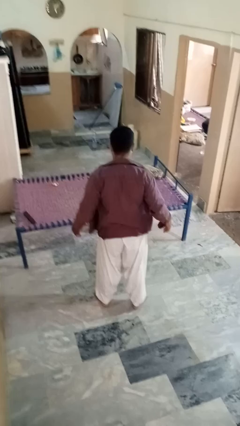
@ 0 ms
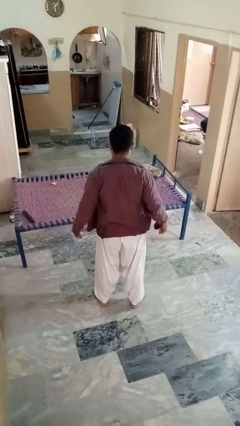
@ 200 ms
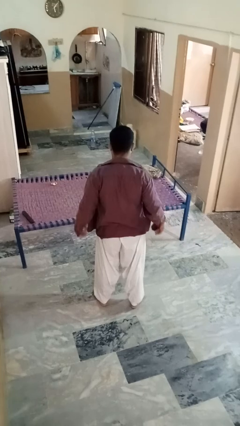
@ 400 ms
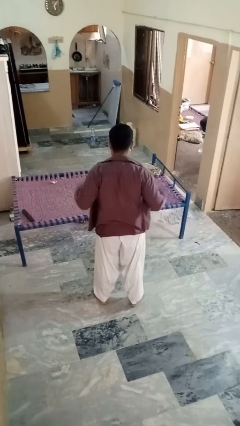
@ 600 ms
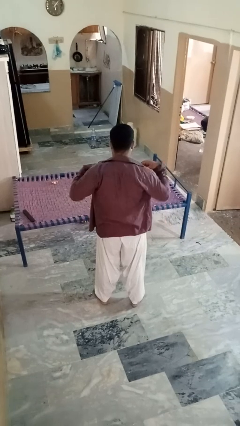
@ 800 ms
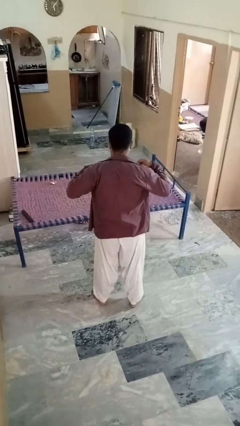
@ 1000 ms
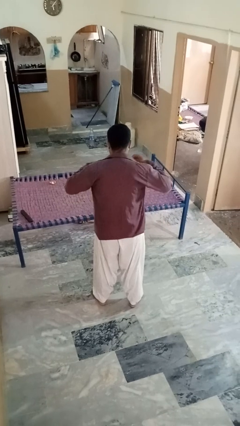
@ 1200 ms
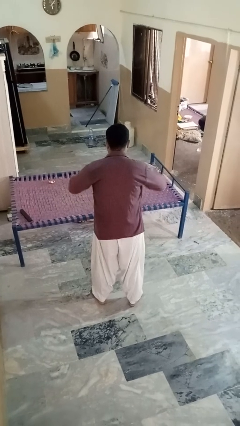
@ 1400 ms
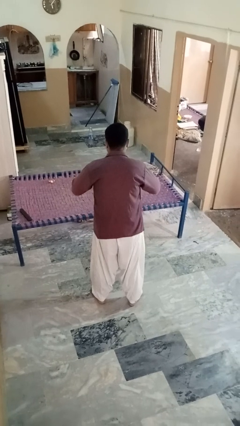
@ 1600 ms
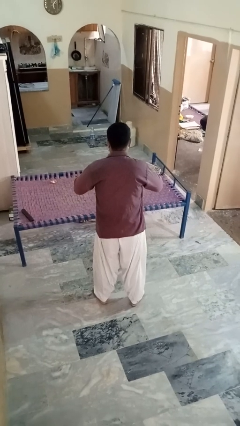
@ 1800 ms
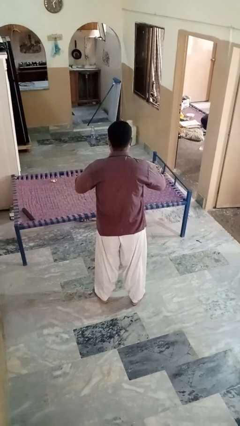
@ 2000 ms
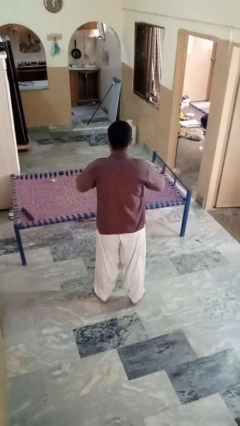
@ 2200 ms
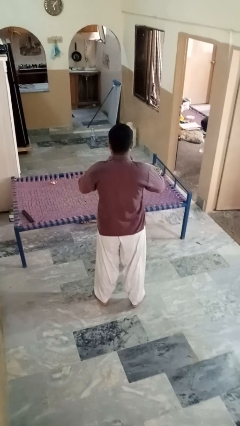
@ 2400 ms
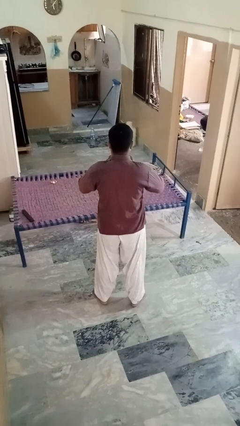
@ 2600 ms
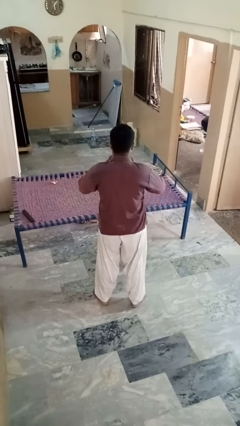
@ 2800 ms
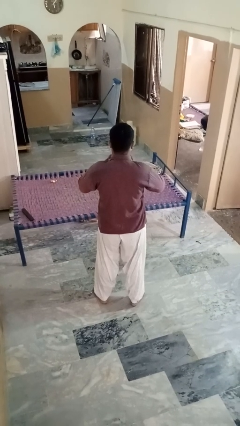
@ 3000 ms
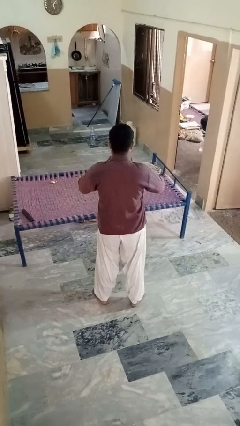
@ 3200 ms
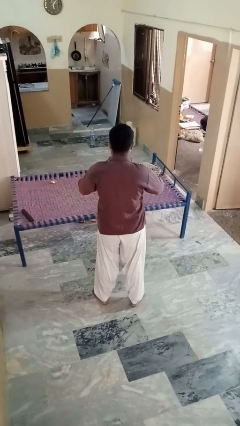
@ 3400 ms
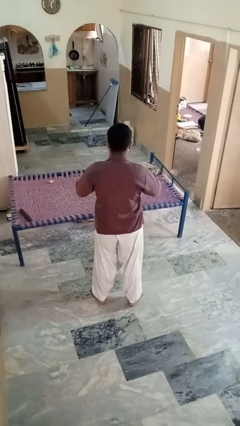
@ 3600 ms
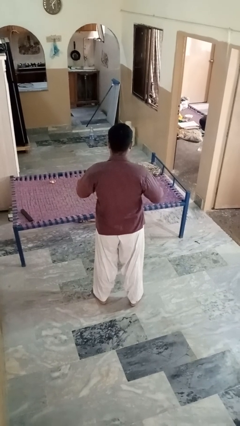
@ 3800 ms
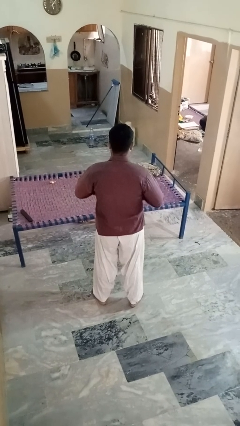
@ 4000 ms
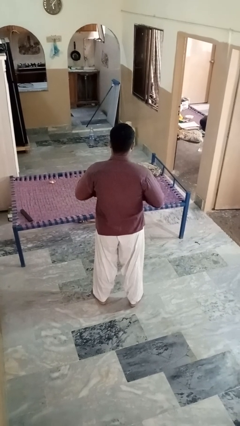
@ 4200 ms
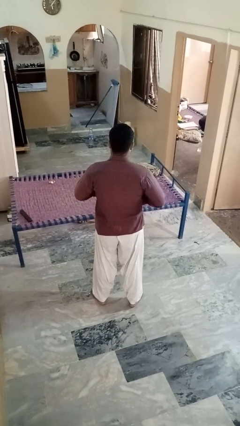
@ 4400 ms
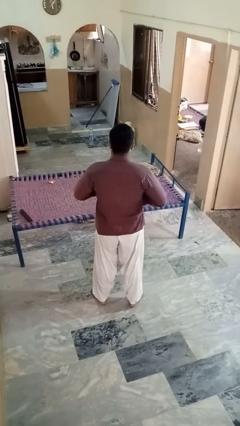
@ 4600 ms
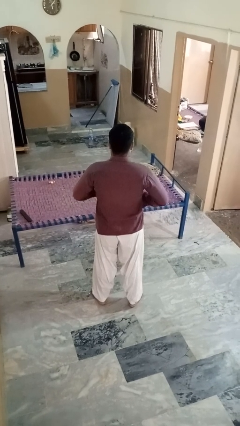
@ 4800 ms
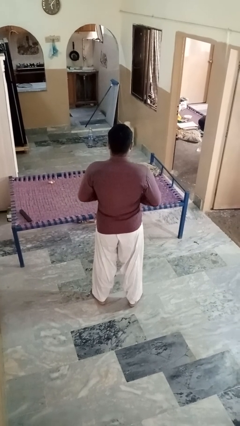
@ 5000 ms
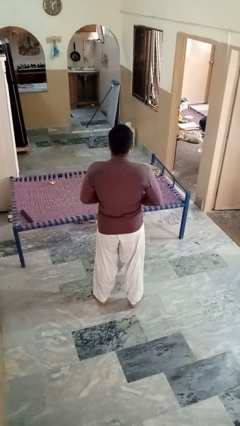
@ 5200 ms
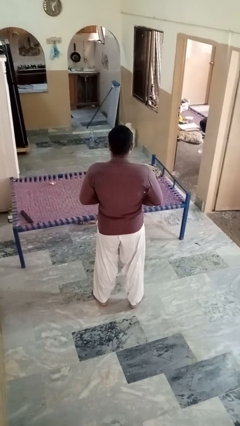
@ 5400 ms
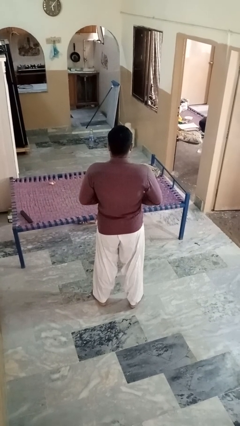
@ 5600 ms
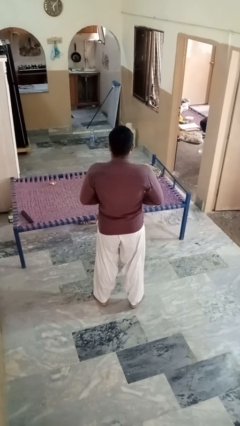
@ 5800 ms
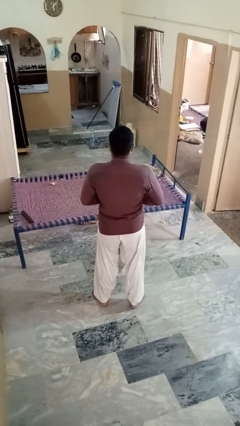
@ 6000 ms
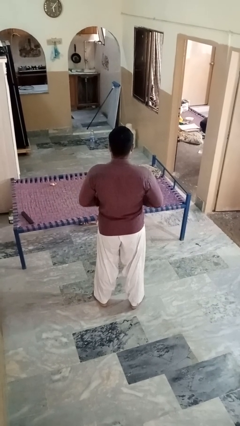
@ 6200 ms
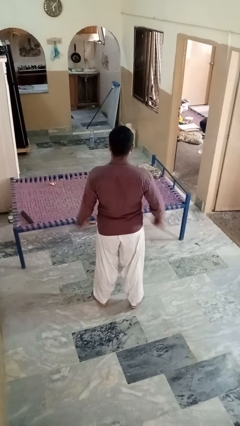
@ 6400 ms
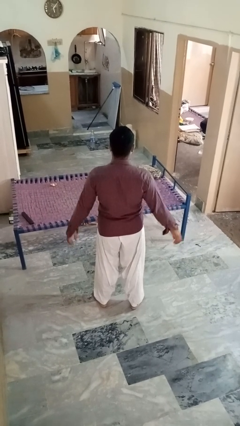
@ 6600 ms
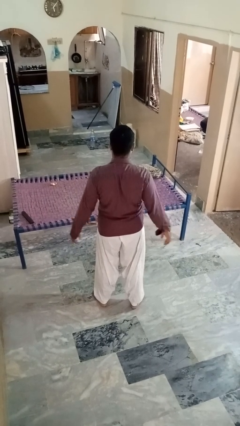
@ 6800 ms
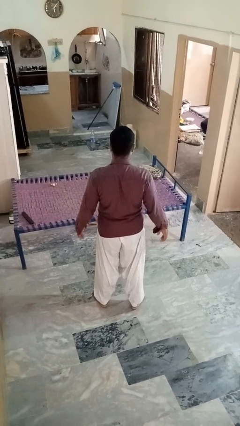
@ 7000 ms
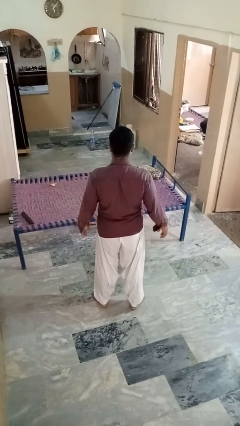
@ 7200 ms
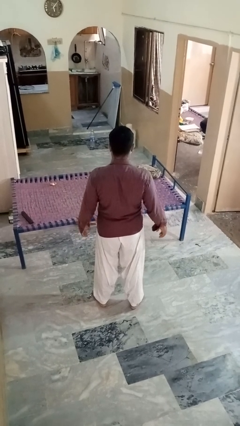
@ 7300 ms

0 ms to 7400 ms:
person buttons shirt

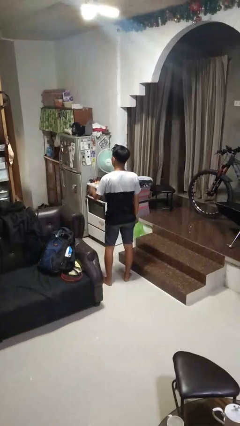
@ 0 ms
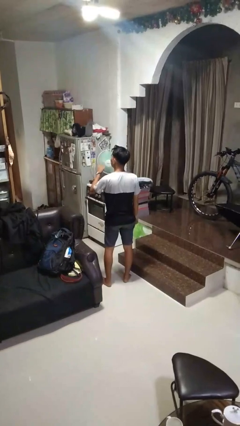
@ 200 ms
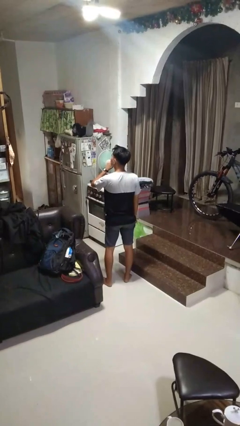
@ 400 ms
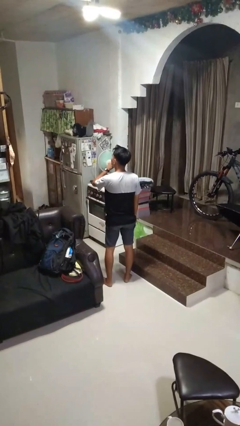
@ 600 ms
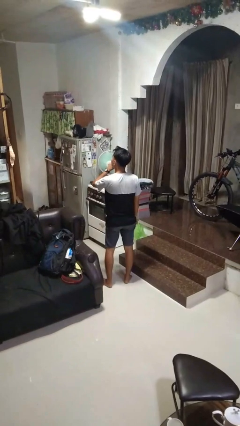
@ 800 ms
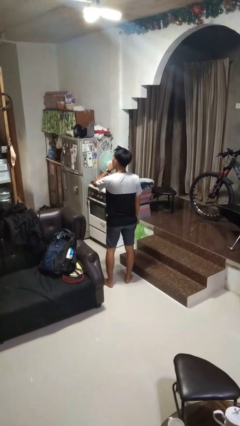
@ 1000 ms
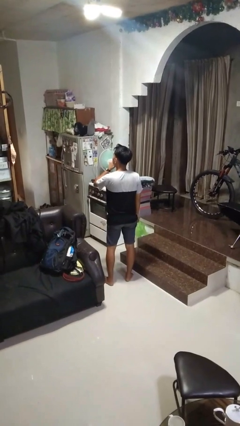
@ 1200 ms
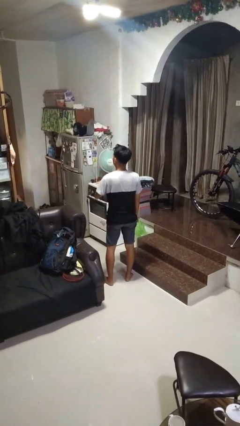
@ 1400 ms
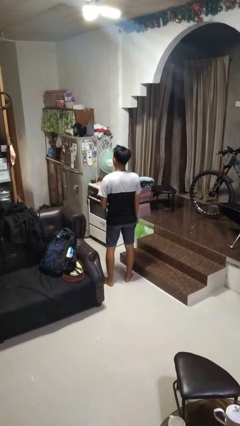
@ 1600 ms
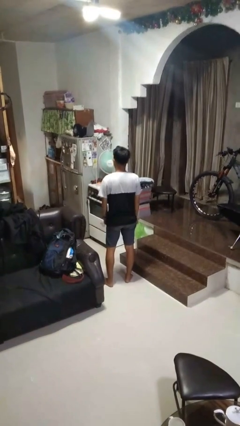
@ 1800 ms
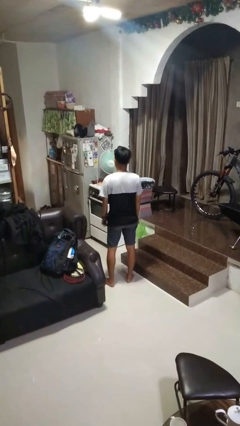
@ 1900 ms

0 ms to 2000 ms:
person gestures be quiet

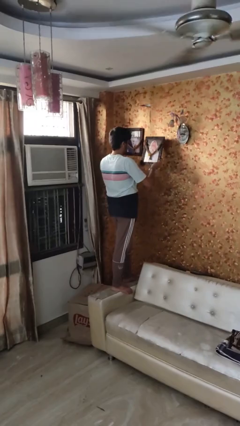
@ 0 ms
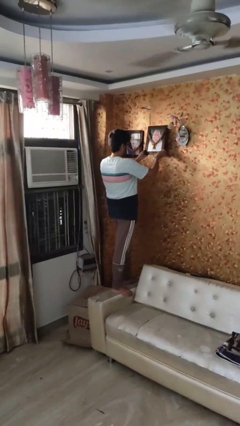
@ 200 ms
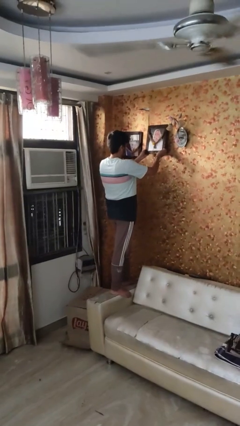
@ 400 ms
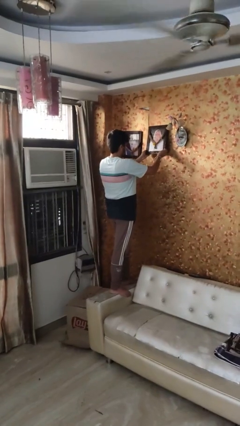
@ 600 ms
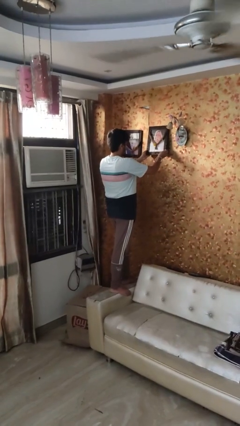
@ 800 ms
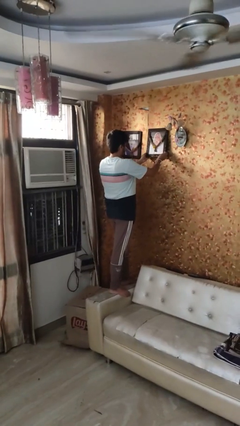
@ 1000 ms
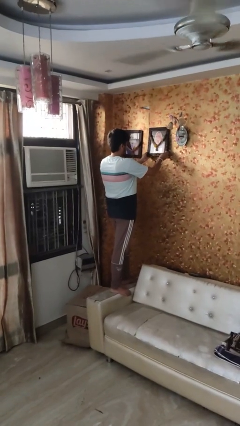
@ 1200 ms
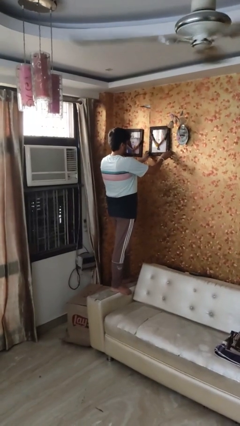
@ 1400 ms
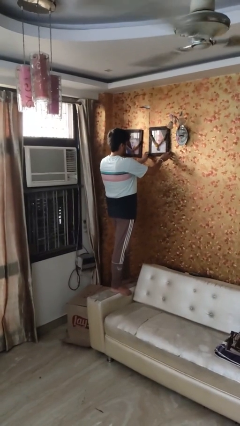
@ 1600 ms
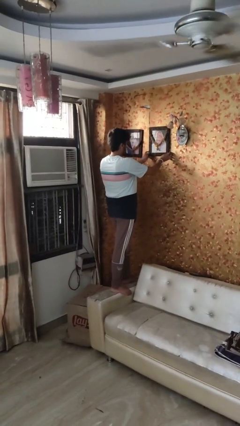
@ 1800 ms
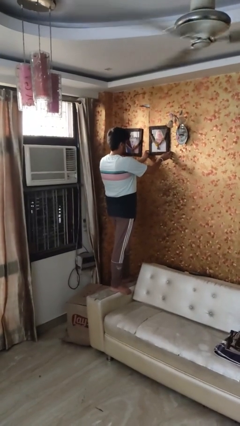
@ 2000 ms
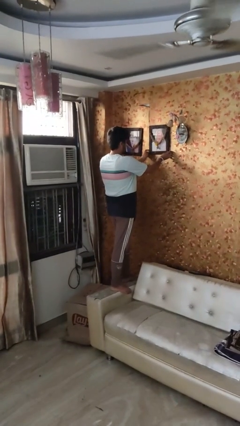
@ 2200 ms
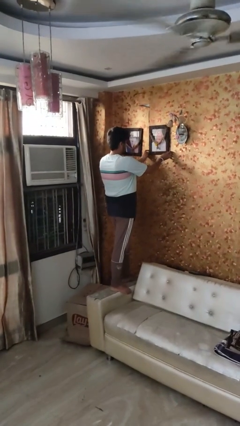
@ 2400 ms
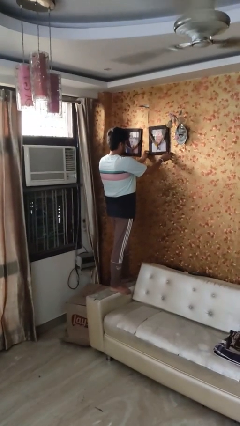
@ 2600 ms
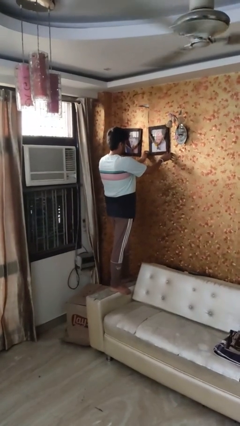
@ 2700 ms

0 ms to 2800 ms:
person puts up picture frame

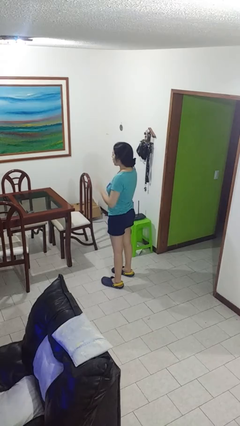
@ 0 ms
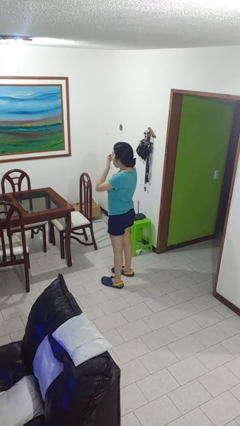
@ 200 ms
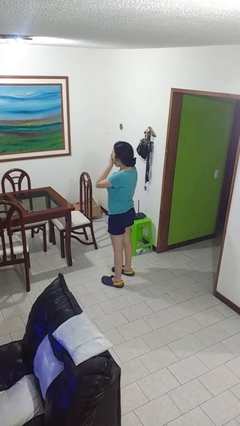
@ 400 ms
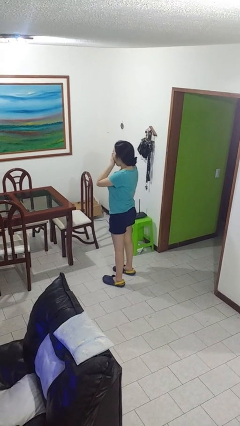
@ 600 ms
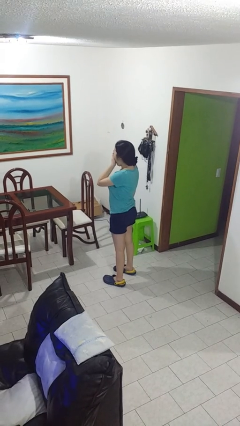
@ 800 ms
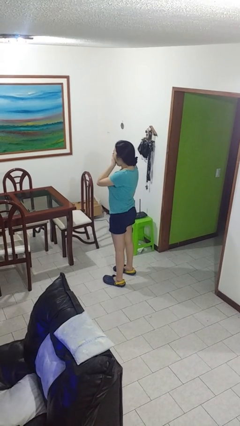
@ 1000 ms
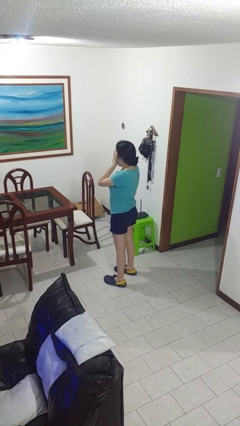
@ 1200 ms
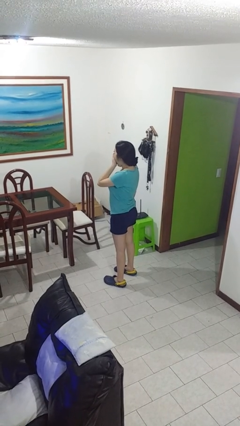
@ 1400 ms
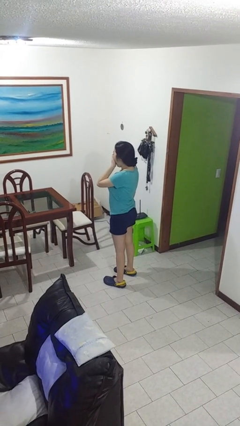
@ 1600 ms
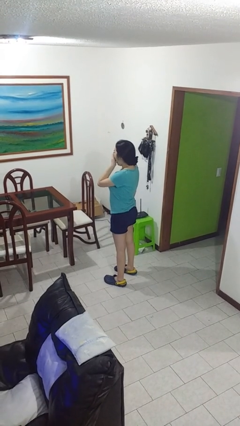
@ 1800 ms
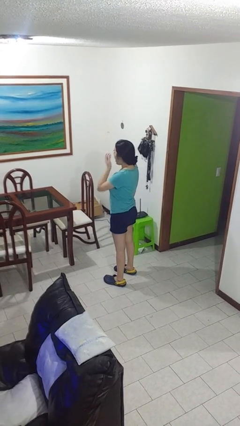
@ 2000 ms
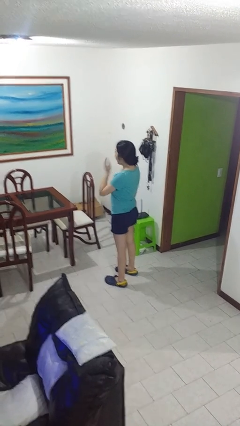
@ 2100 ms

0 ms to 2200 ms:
person yawns

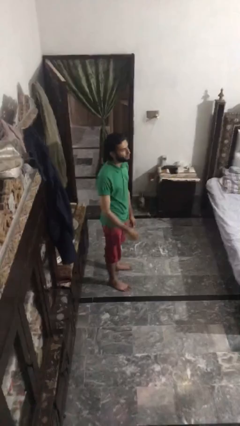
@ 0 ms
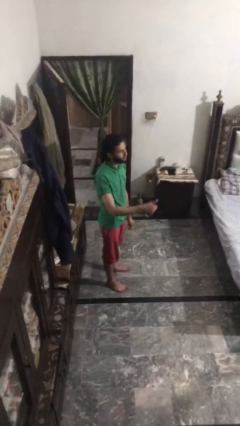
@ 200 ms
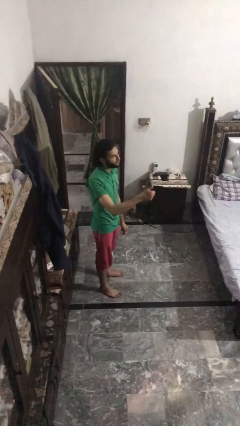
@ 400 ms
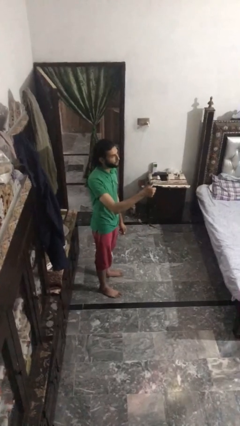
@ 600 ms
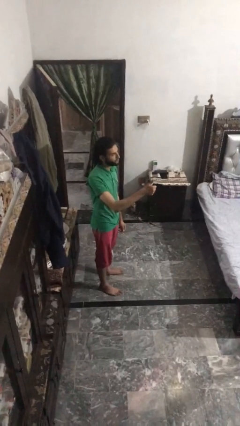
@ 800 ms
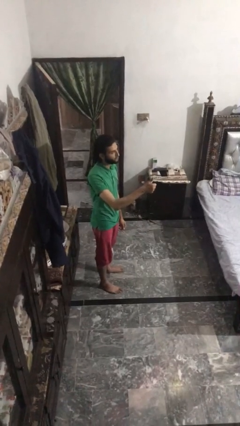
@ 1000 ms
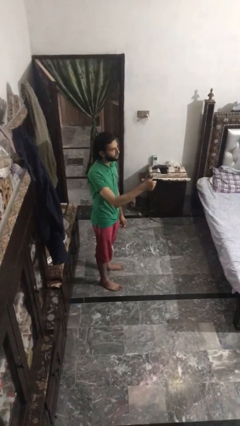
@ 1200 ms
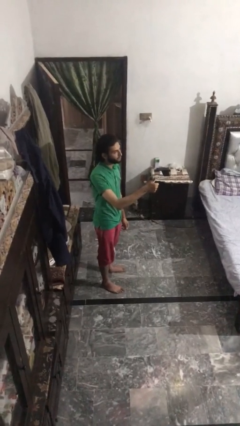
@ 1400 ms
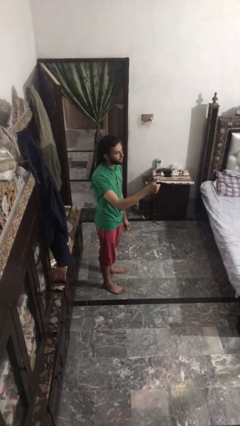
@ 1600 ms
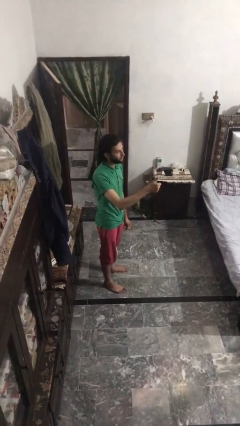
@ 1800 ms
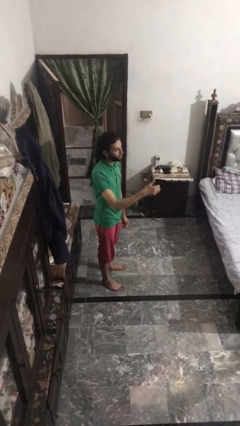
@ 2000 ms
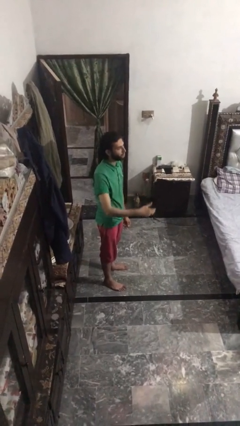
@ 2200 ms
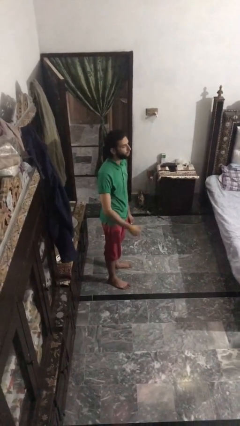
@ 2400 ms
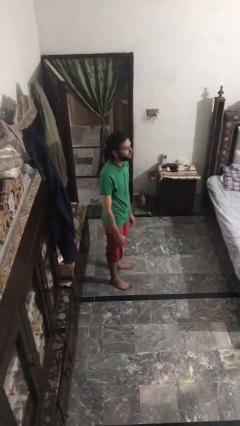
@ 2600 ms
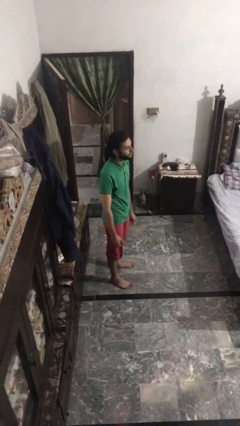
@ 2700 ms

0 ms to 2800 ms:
person gestures thumbs up

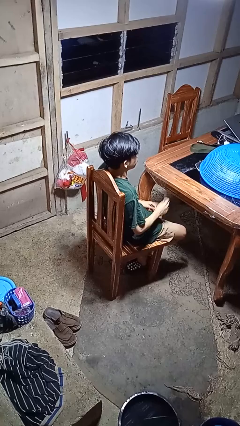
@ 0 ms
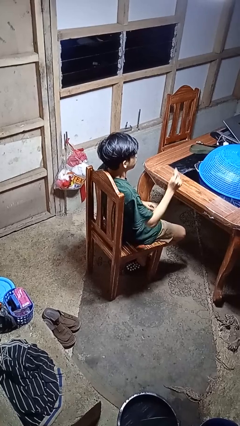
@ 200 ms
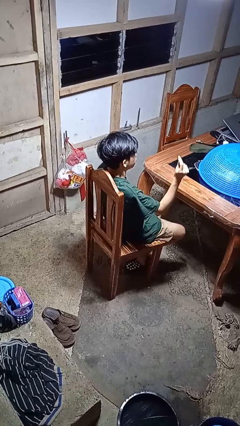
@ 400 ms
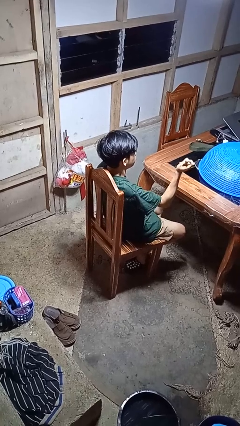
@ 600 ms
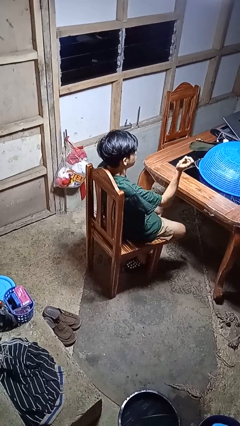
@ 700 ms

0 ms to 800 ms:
person snaps fingers
